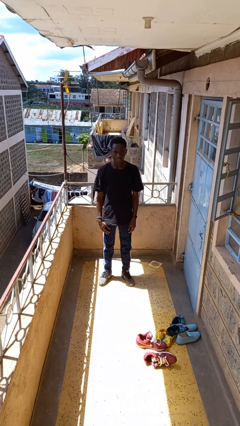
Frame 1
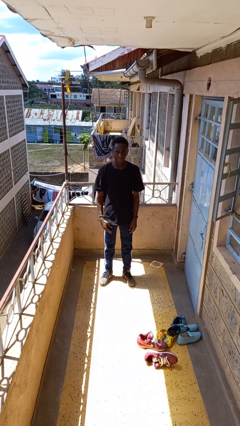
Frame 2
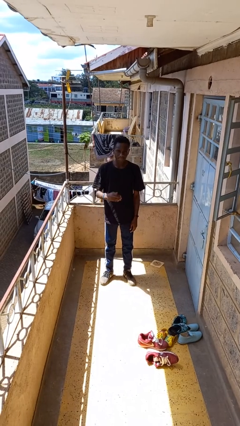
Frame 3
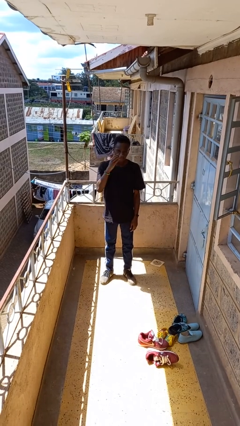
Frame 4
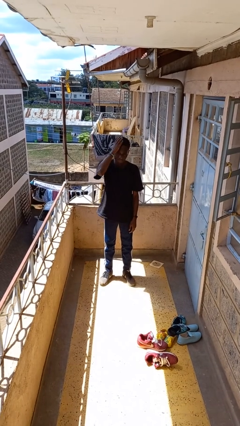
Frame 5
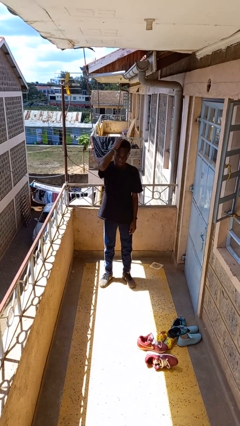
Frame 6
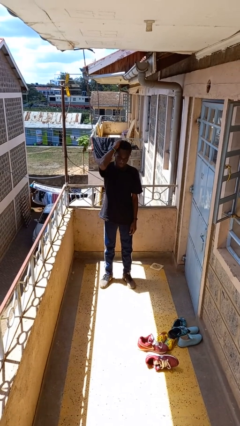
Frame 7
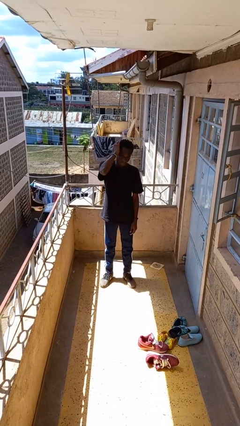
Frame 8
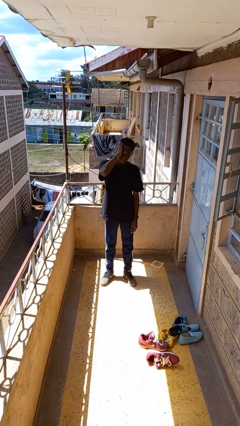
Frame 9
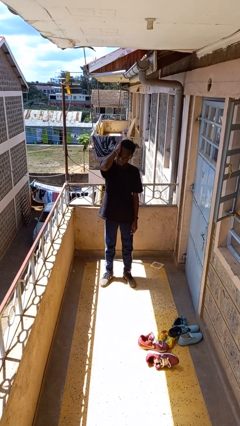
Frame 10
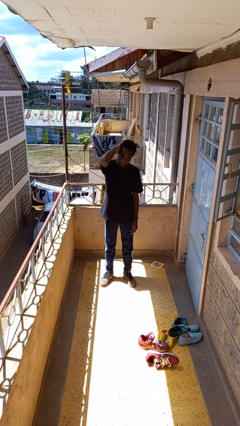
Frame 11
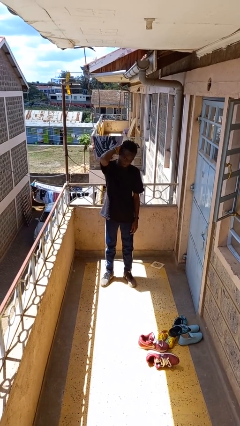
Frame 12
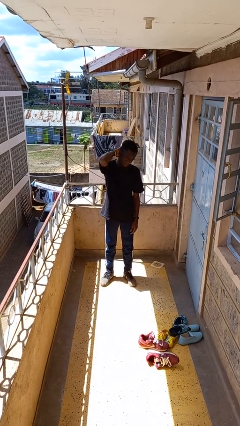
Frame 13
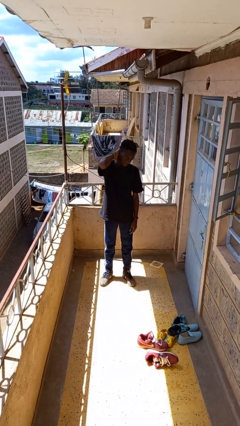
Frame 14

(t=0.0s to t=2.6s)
person strokes hair

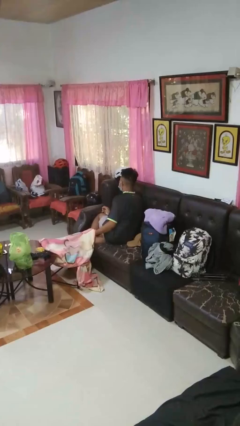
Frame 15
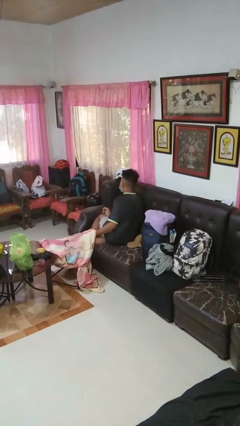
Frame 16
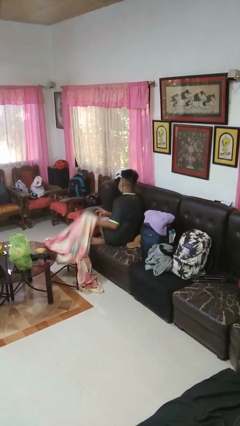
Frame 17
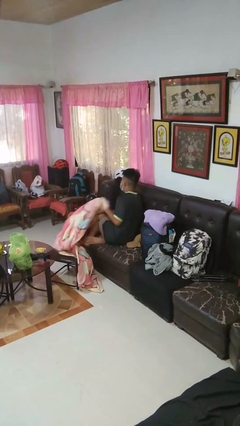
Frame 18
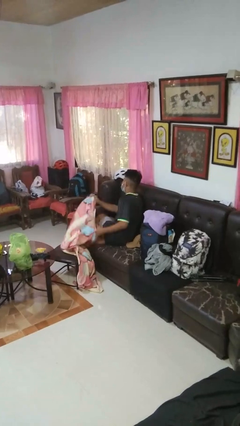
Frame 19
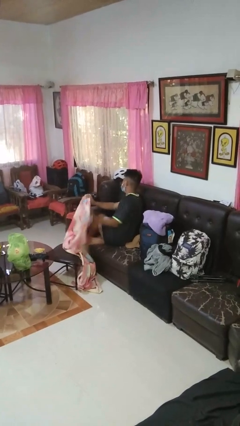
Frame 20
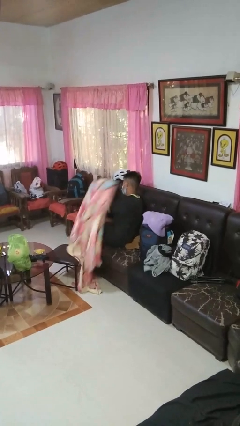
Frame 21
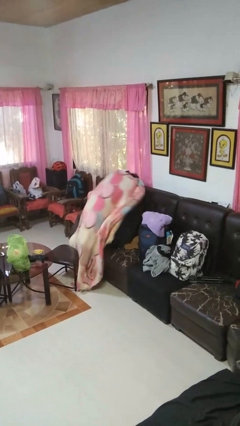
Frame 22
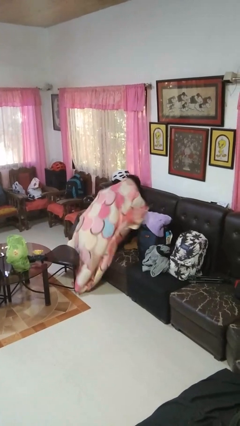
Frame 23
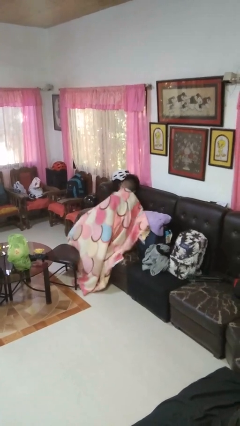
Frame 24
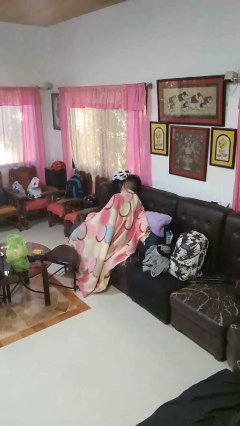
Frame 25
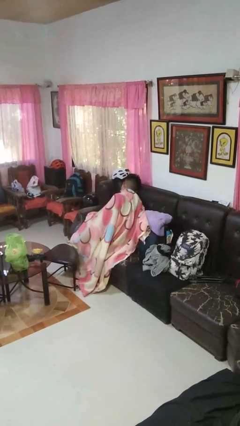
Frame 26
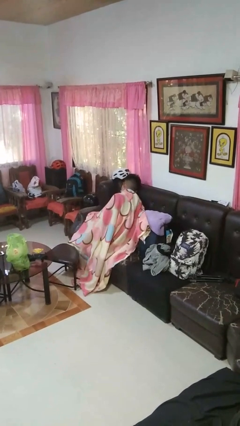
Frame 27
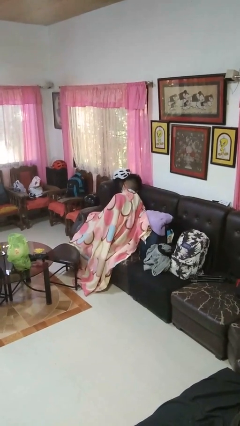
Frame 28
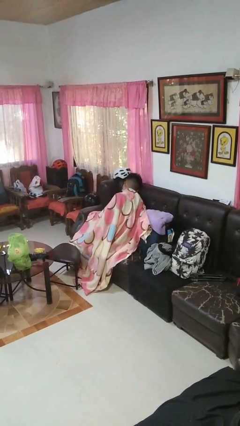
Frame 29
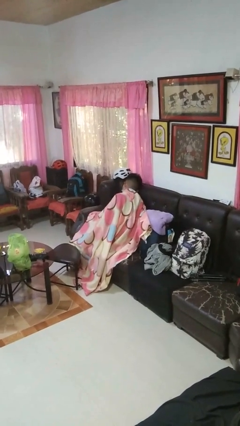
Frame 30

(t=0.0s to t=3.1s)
person covers with blanket

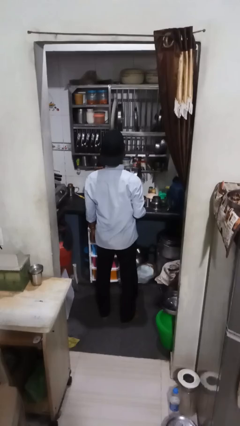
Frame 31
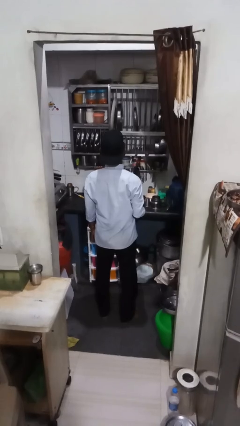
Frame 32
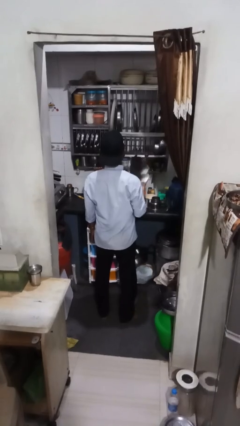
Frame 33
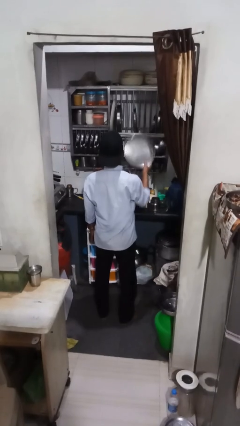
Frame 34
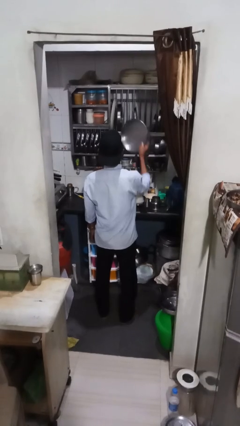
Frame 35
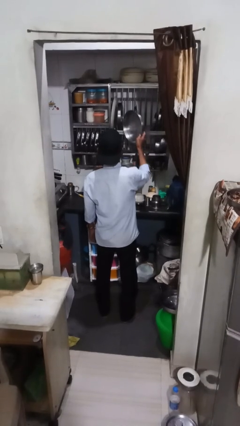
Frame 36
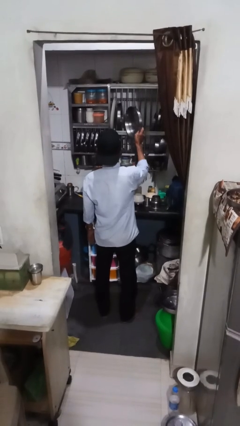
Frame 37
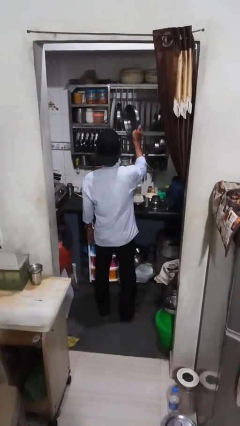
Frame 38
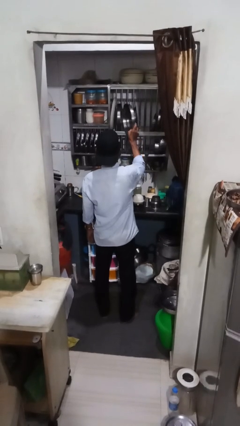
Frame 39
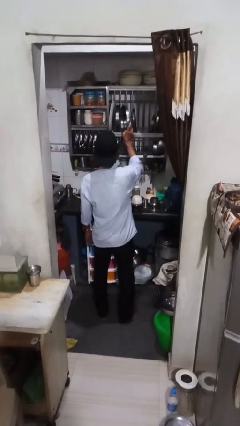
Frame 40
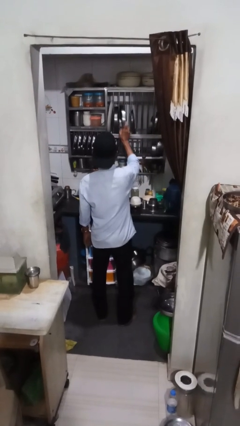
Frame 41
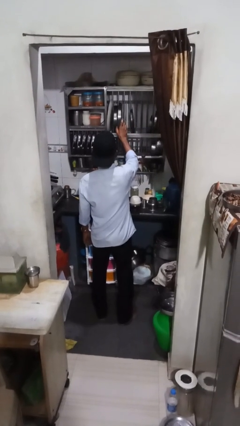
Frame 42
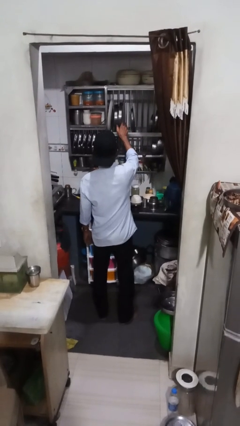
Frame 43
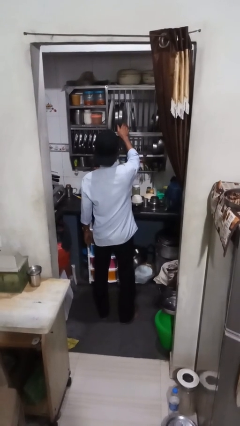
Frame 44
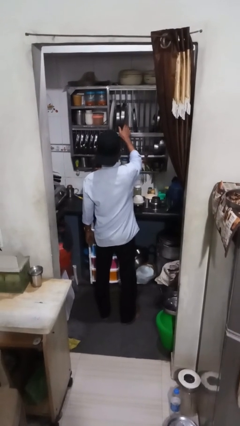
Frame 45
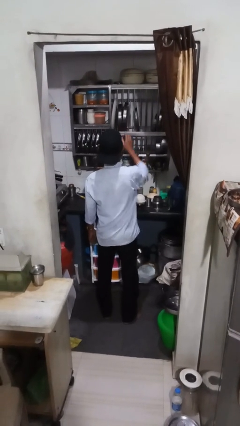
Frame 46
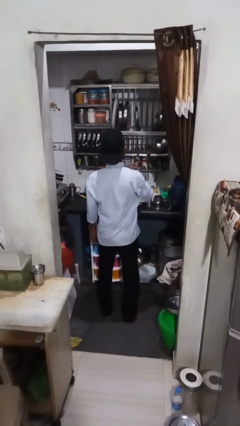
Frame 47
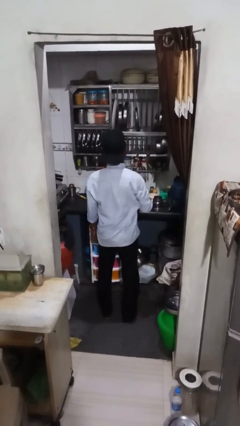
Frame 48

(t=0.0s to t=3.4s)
person puts object in cabinet

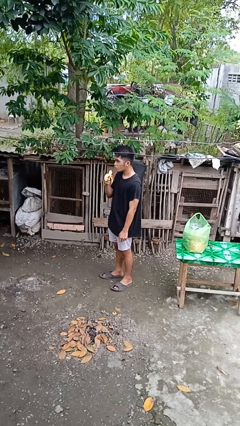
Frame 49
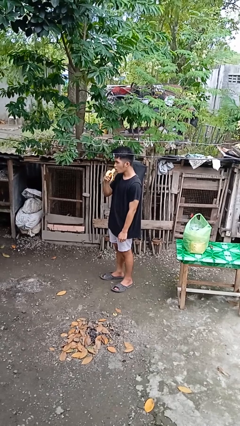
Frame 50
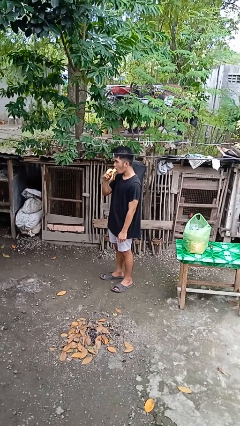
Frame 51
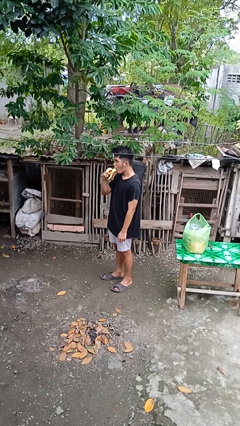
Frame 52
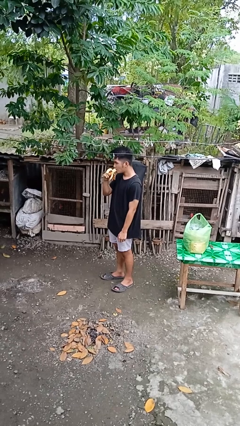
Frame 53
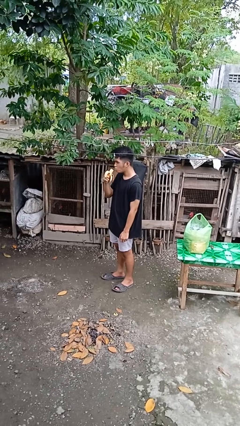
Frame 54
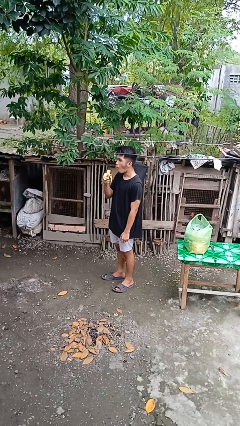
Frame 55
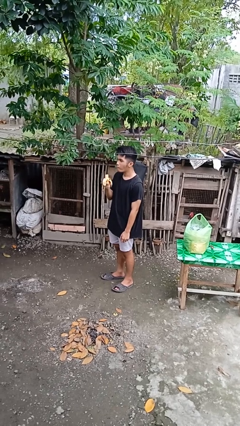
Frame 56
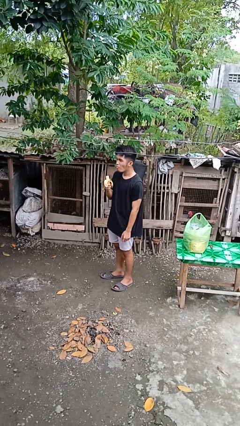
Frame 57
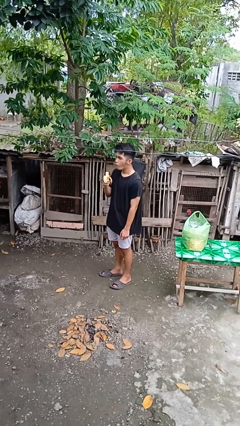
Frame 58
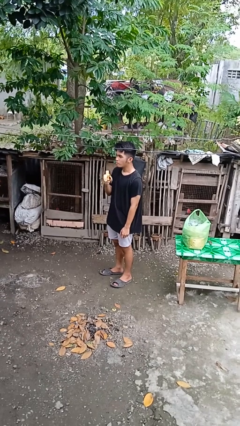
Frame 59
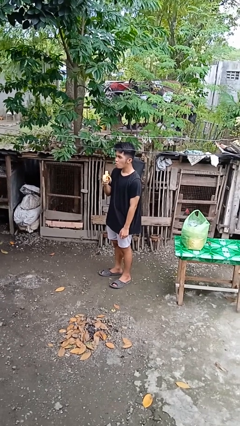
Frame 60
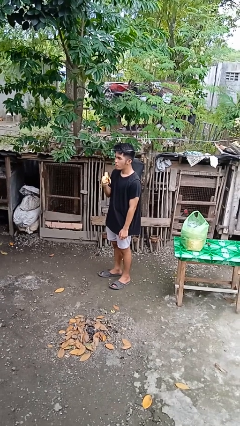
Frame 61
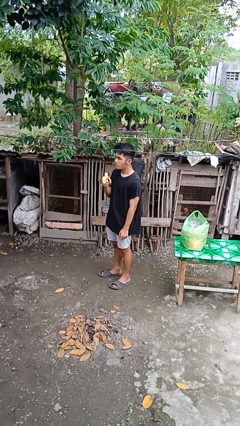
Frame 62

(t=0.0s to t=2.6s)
person eats banana

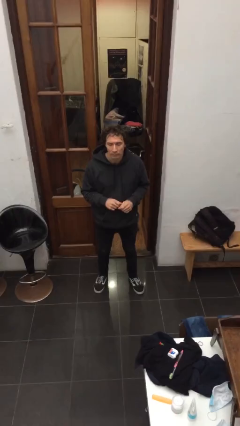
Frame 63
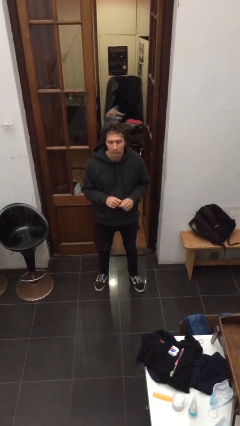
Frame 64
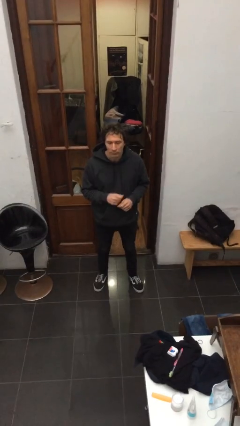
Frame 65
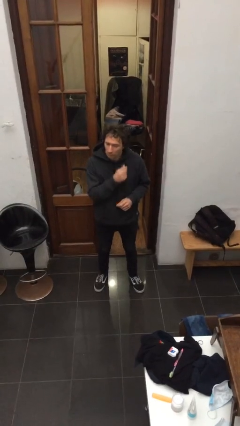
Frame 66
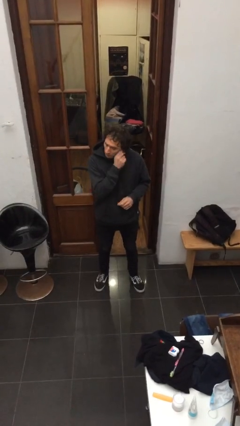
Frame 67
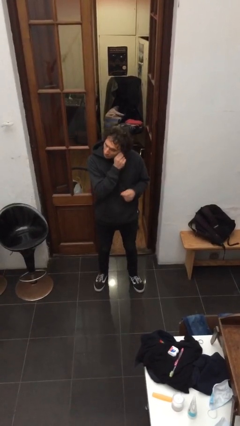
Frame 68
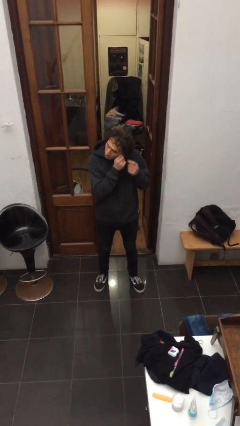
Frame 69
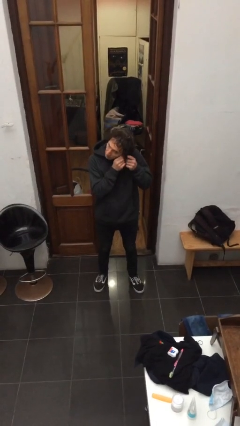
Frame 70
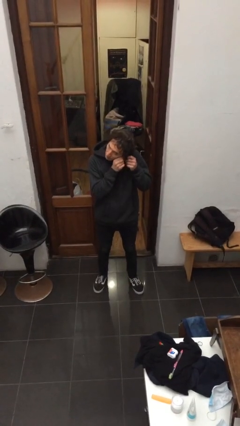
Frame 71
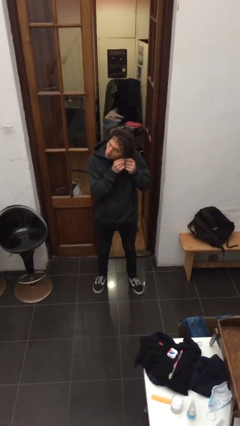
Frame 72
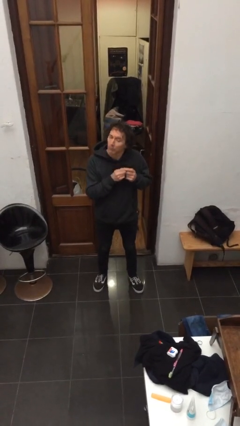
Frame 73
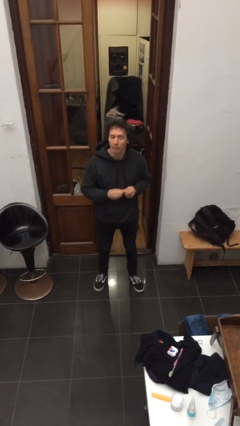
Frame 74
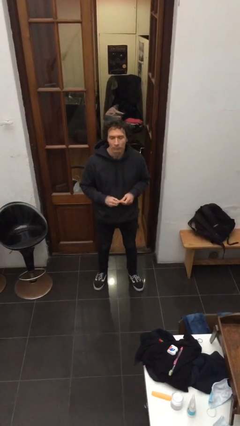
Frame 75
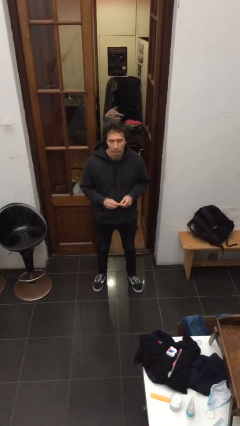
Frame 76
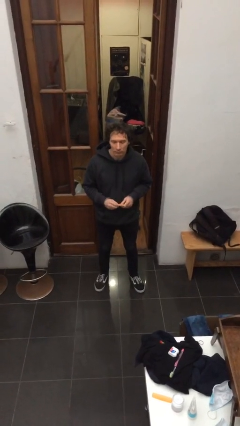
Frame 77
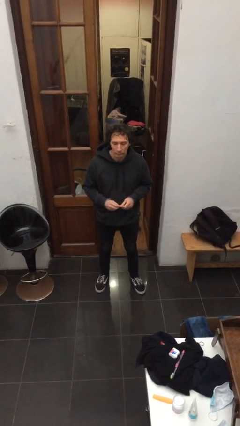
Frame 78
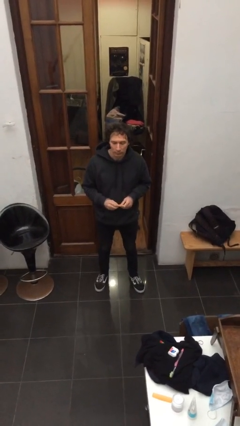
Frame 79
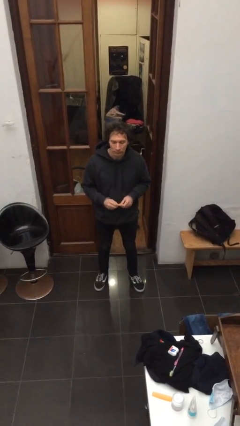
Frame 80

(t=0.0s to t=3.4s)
person takes off earrings

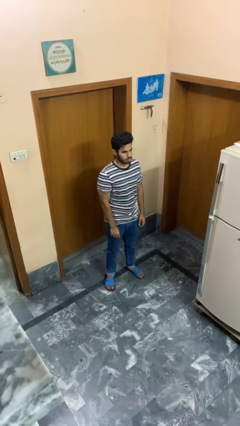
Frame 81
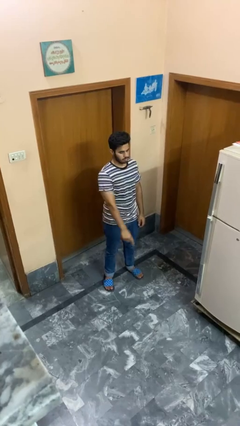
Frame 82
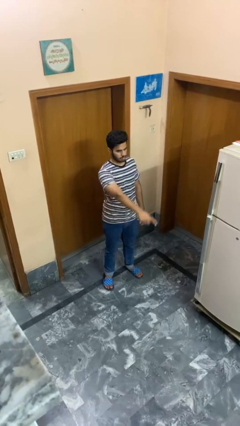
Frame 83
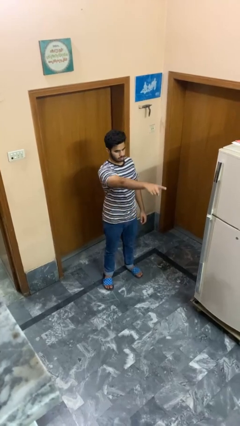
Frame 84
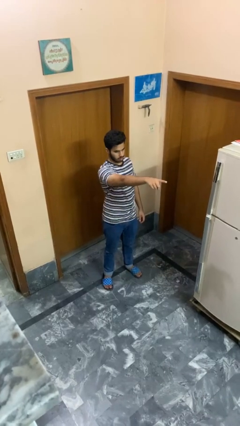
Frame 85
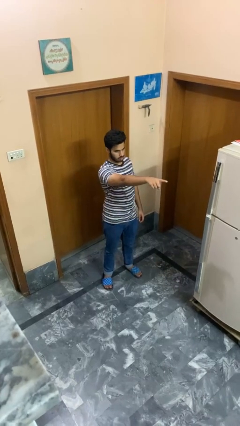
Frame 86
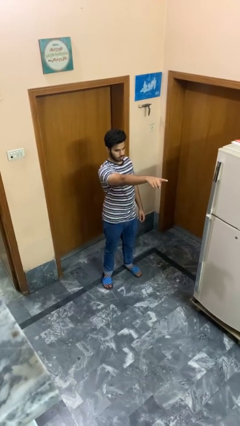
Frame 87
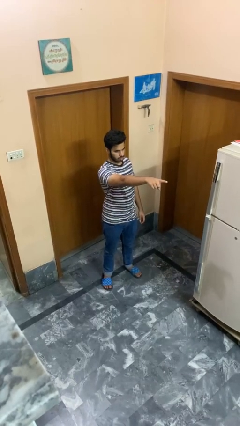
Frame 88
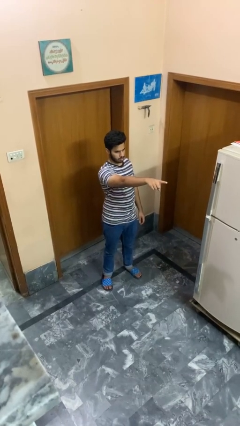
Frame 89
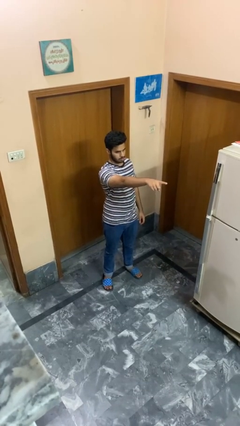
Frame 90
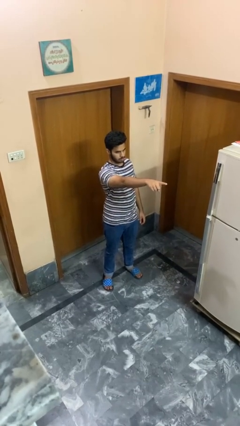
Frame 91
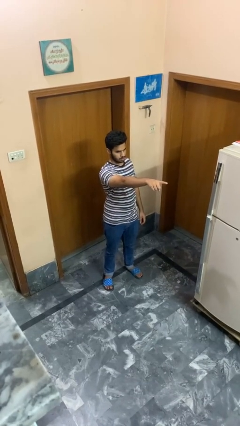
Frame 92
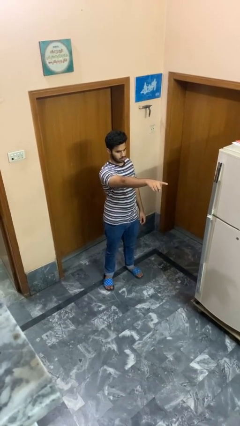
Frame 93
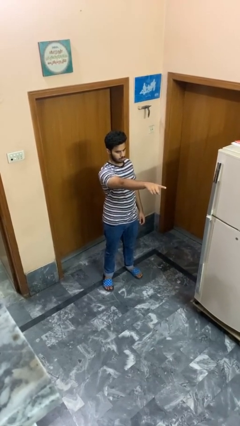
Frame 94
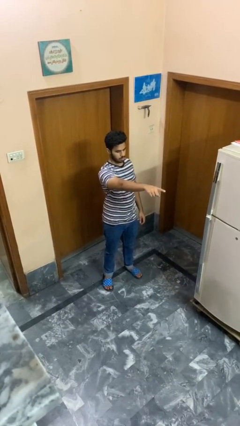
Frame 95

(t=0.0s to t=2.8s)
person points at person
